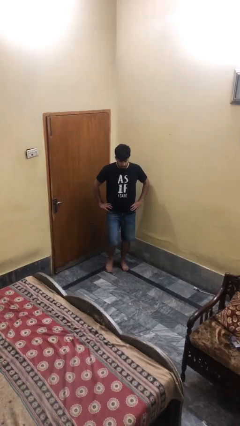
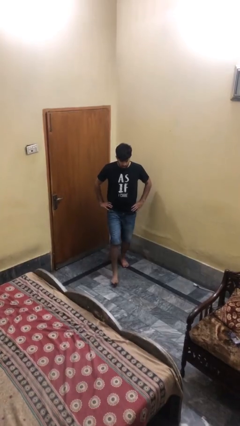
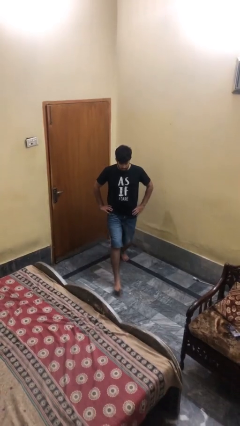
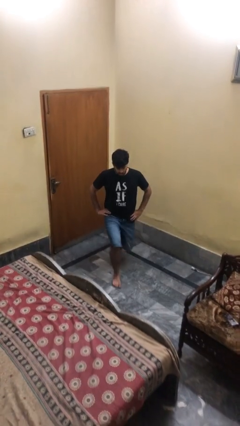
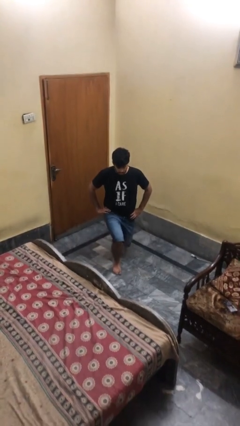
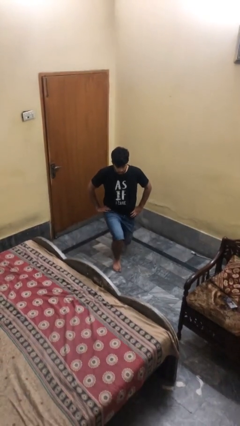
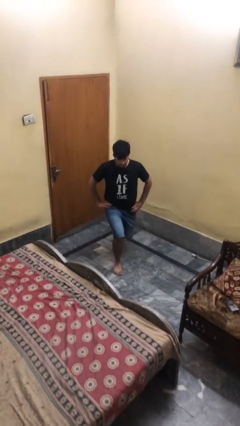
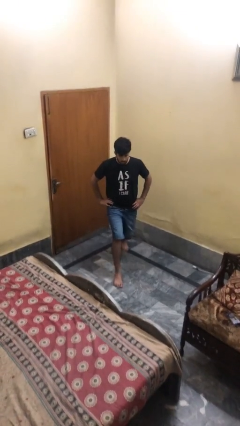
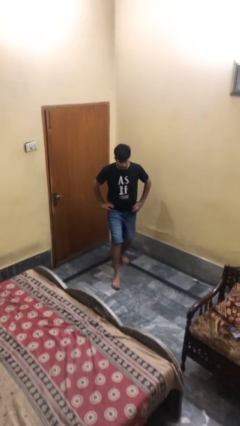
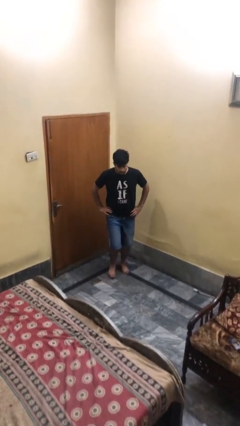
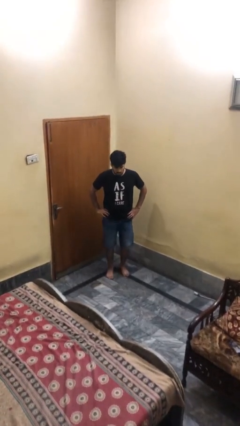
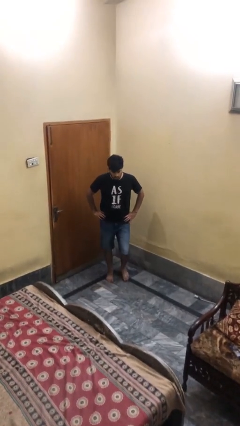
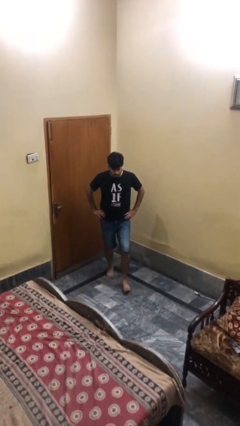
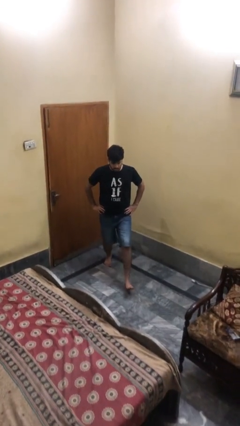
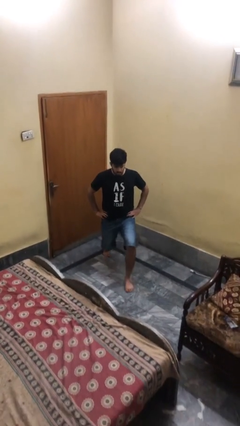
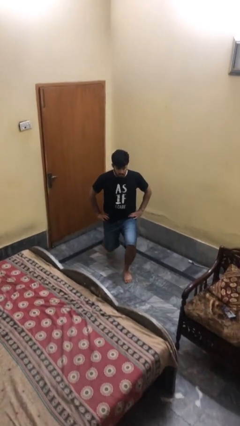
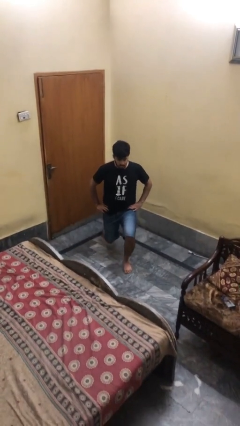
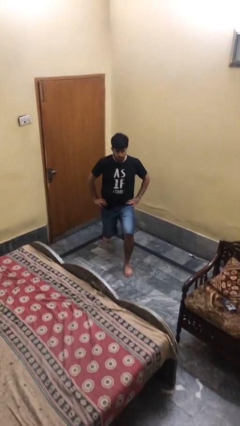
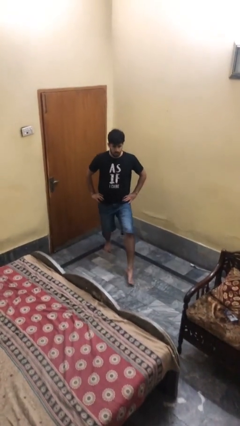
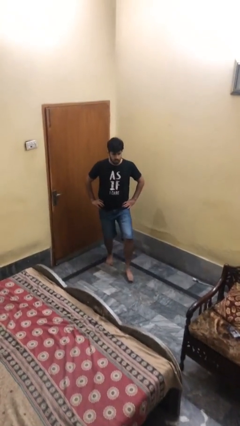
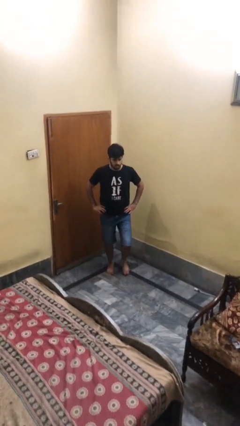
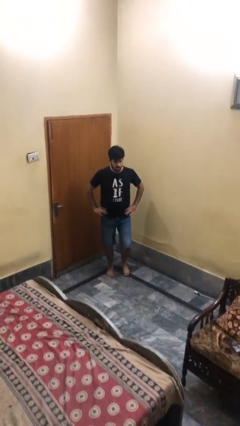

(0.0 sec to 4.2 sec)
person exercises with lunges

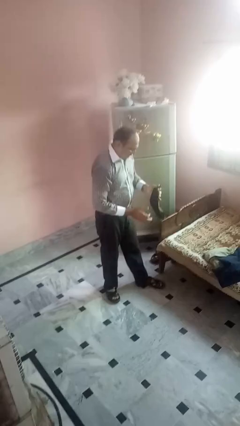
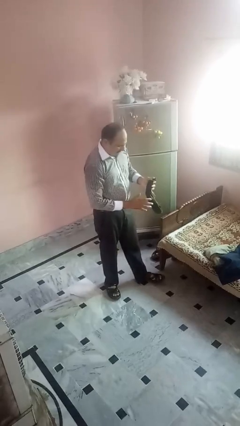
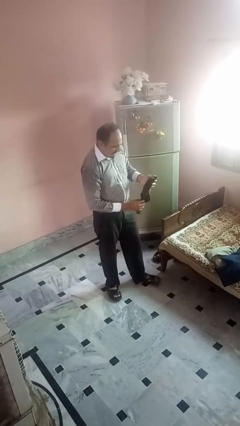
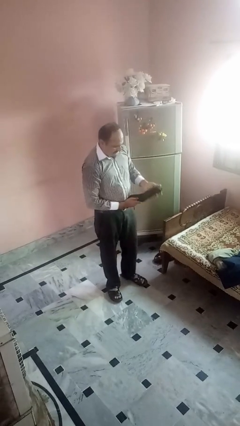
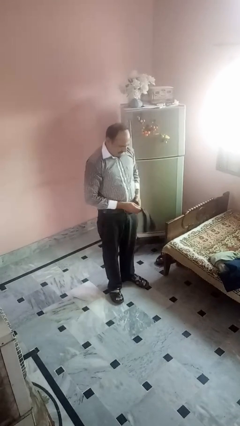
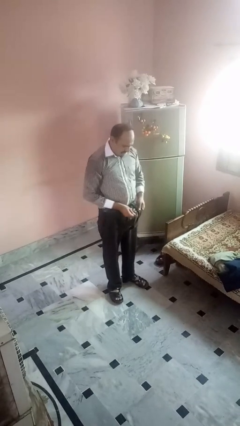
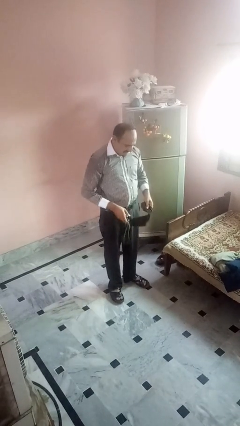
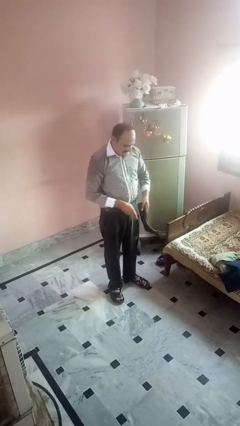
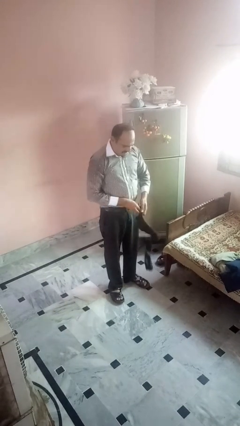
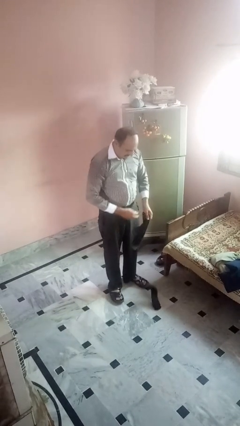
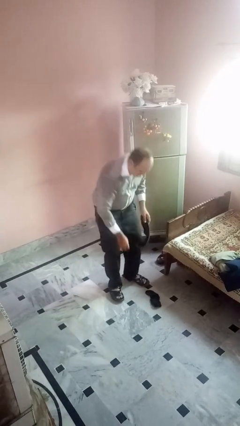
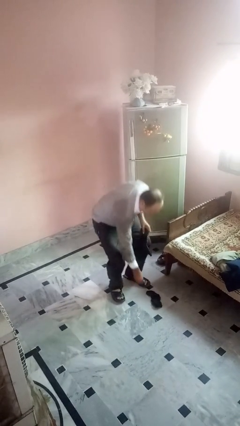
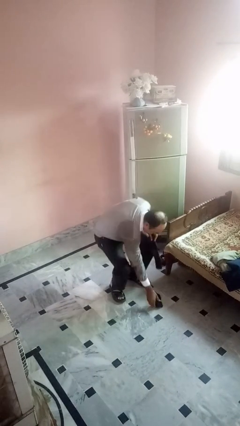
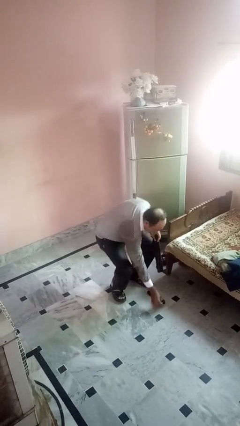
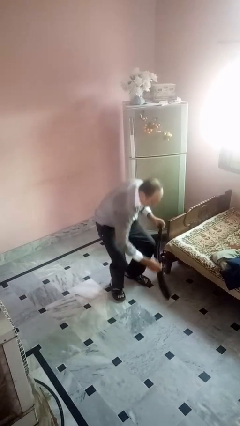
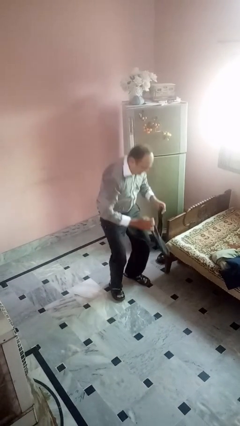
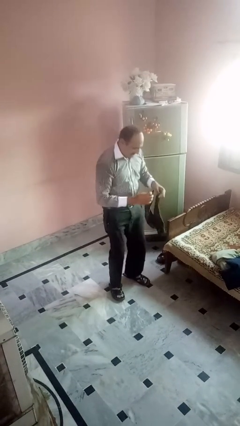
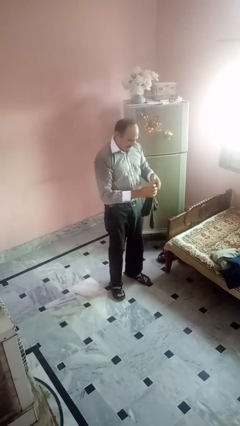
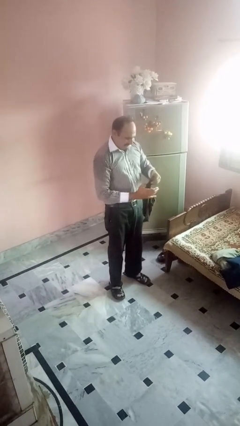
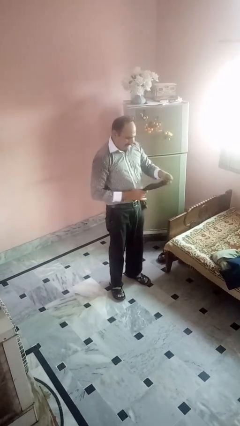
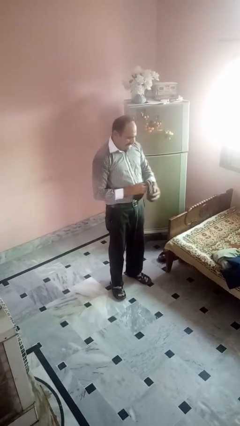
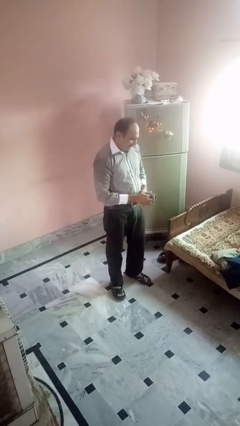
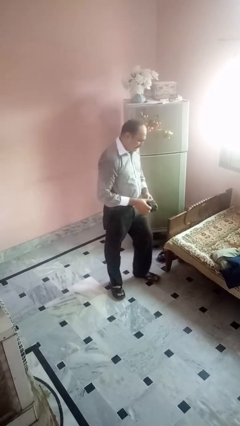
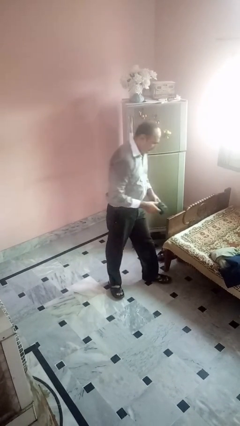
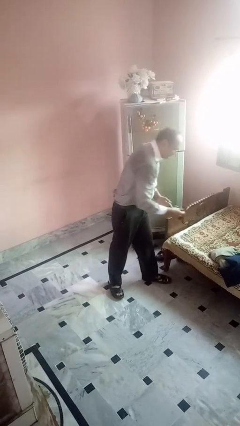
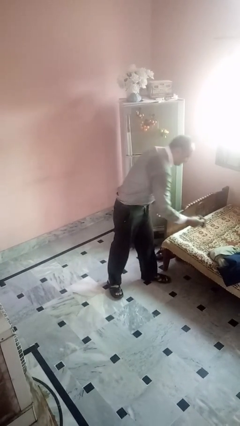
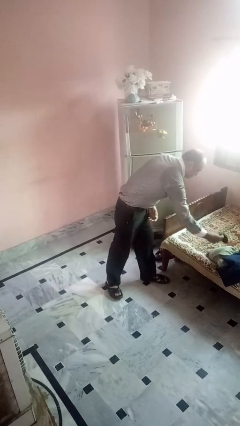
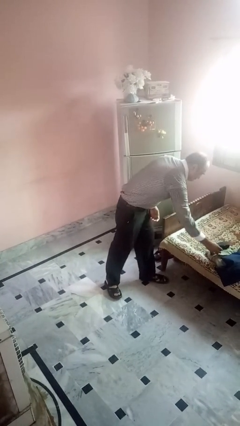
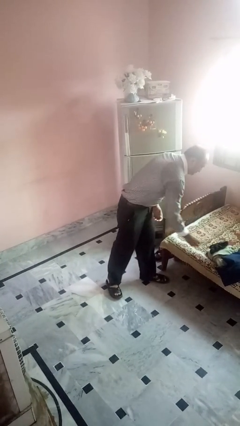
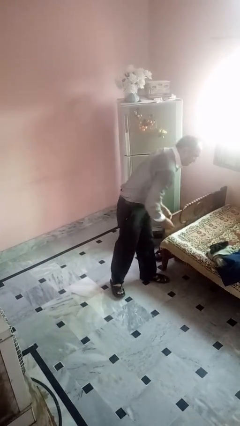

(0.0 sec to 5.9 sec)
person folds socks

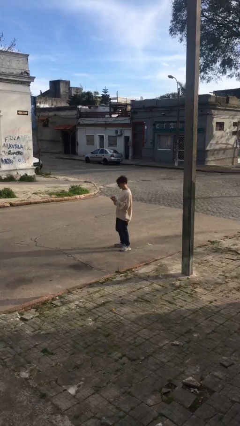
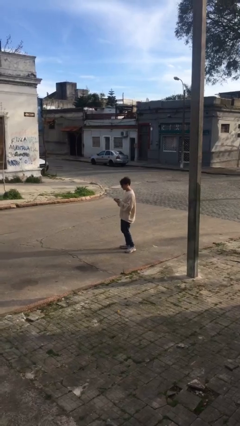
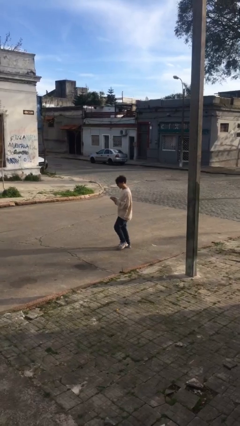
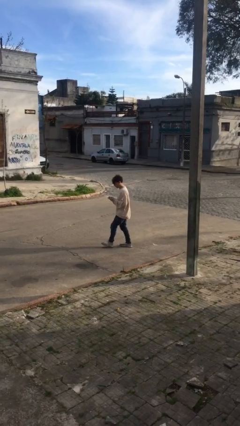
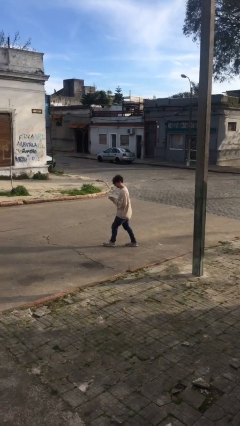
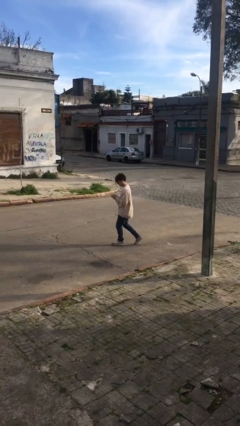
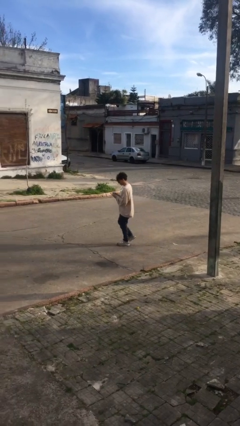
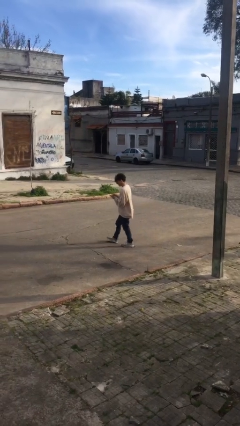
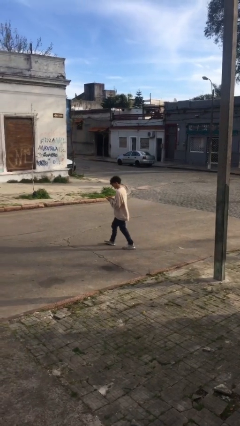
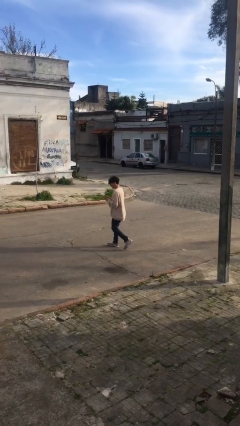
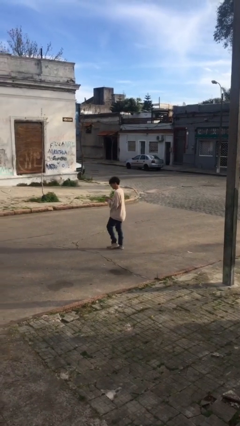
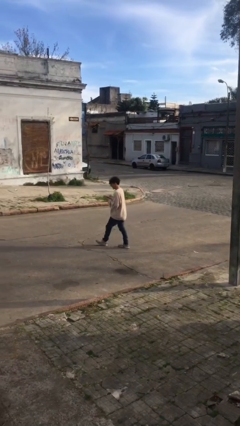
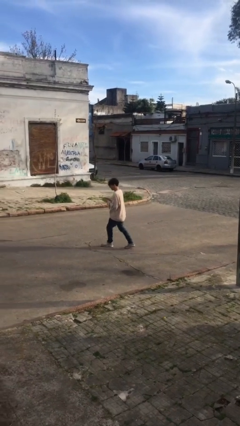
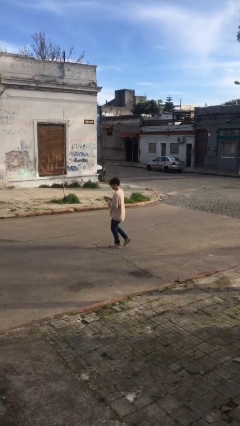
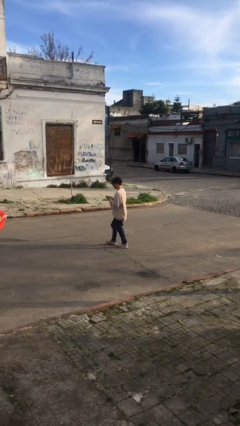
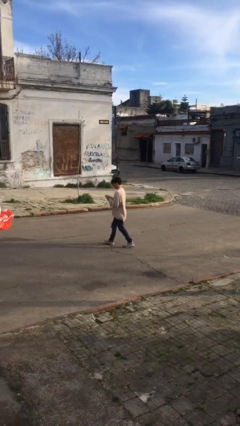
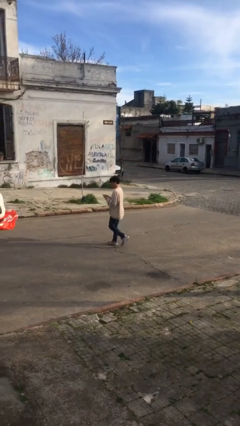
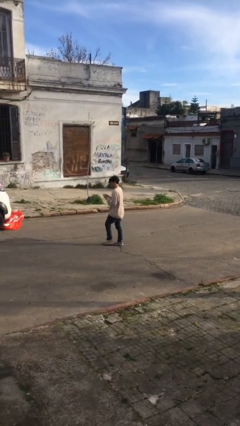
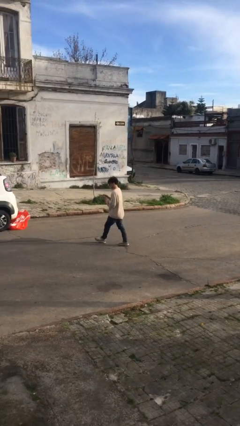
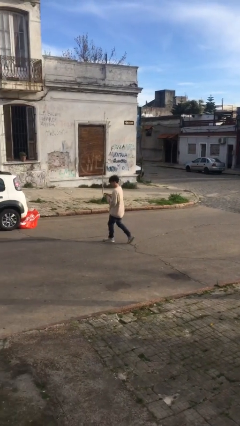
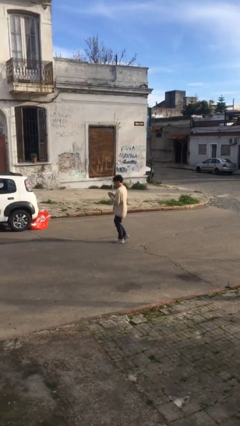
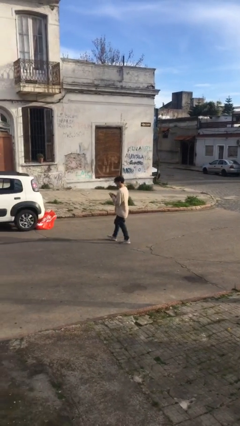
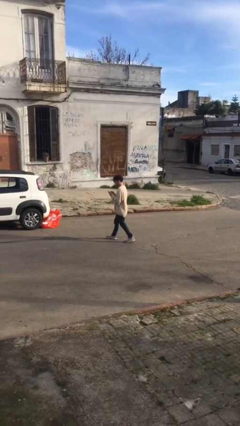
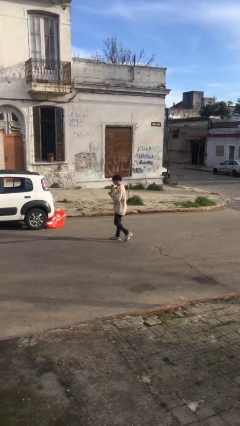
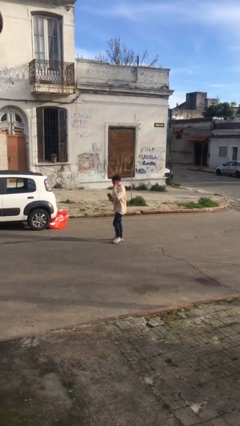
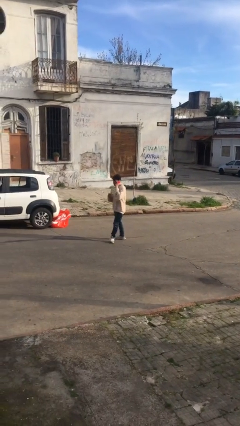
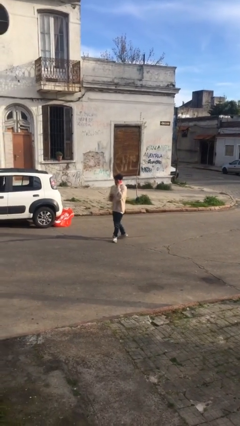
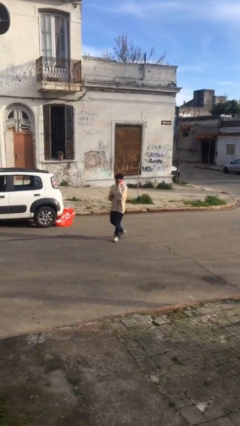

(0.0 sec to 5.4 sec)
person texts on phone

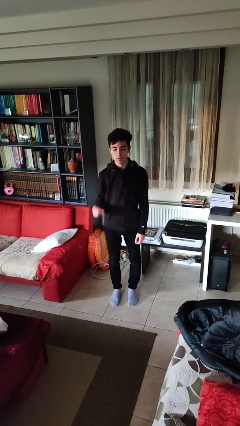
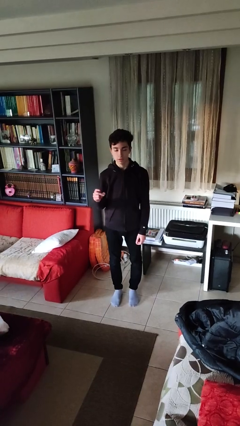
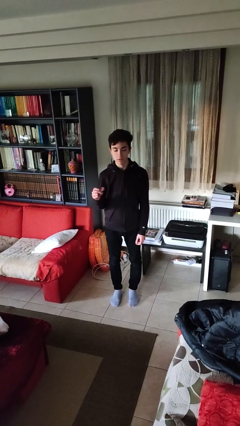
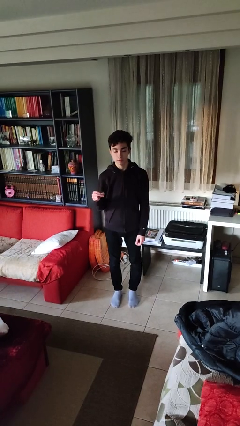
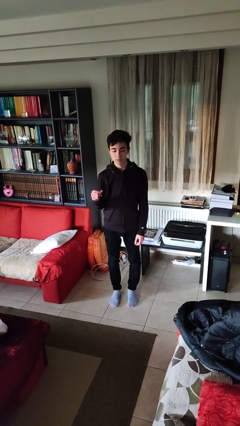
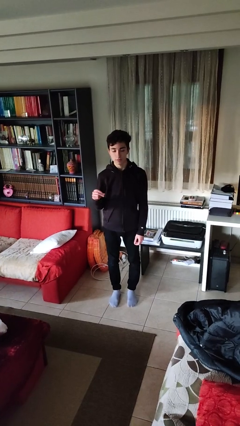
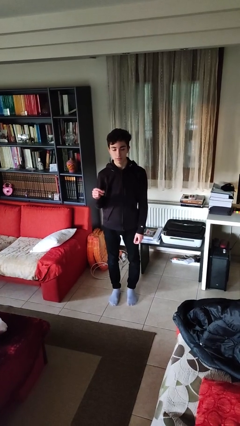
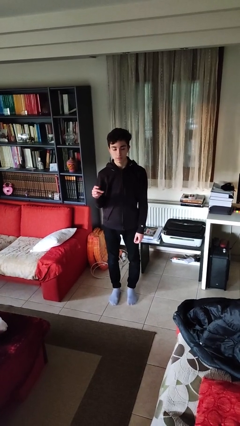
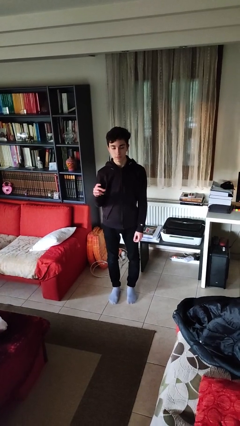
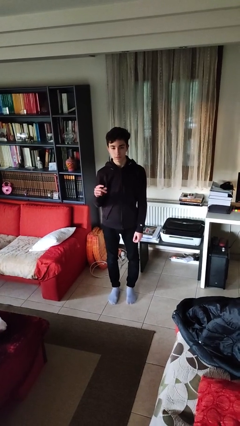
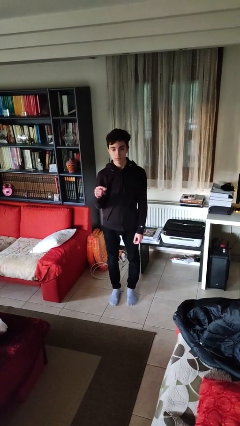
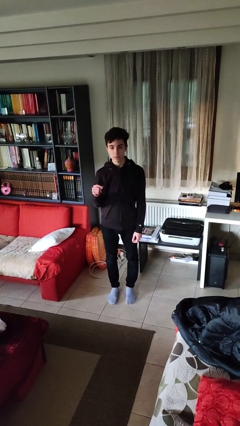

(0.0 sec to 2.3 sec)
person snaps fingers

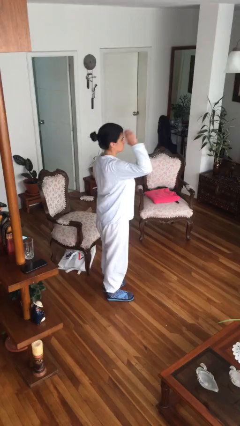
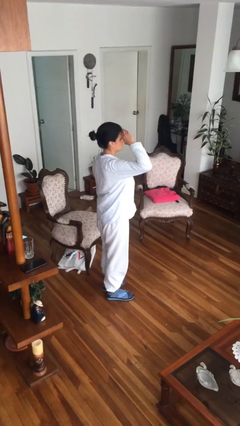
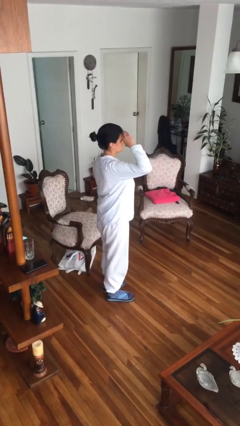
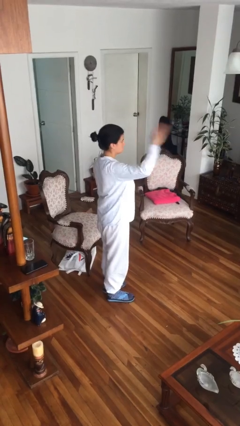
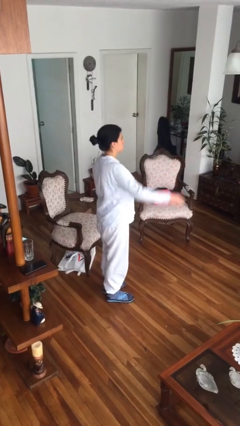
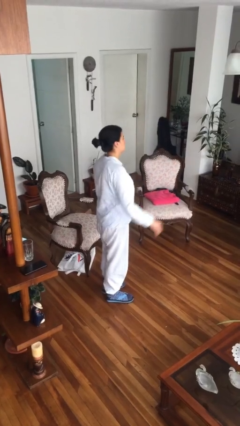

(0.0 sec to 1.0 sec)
person salutes
